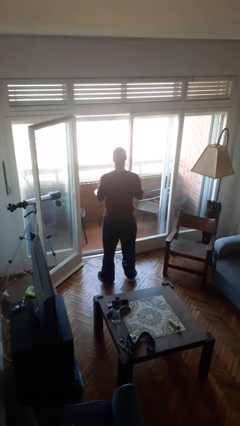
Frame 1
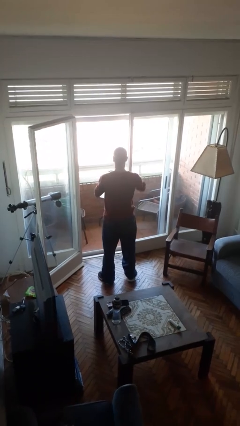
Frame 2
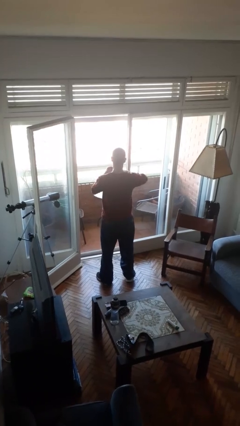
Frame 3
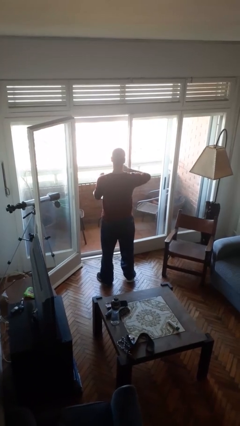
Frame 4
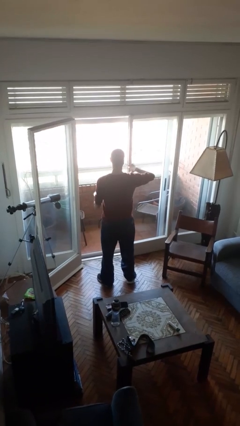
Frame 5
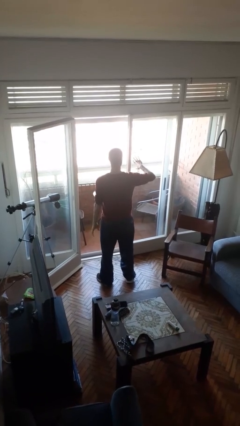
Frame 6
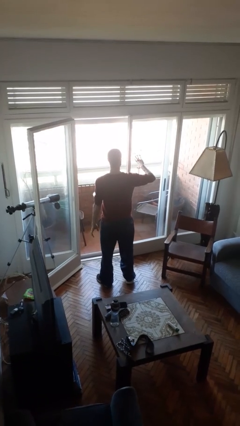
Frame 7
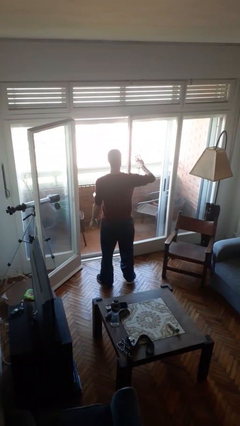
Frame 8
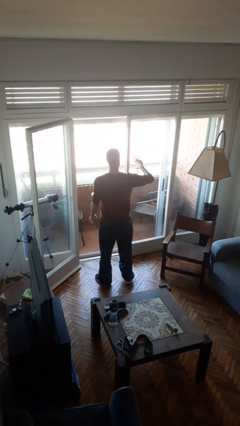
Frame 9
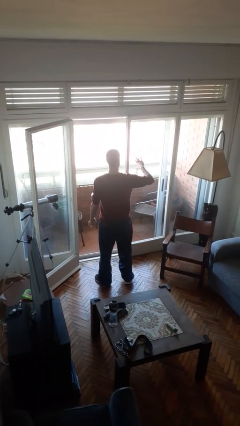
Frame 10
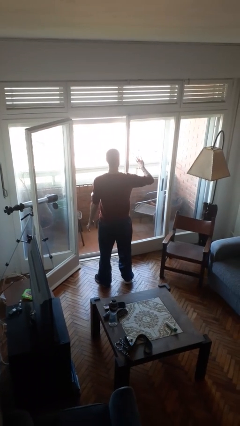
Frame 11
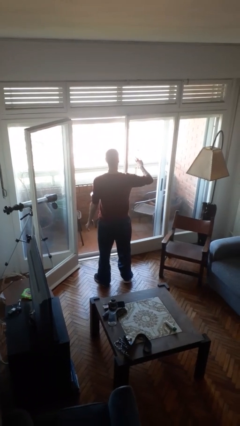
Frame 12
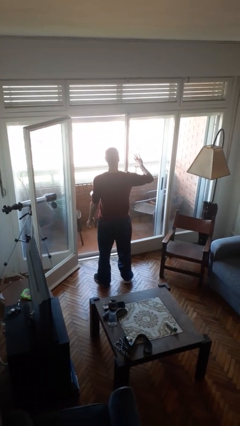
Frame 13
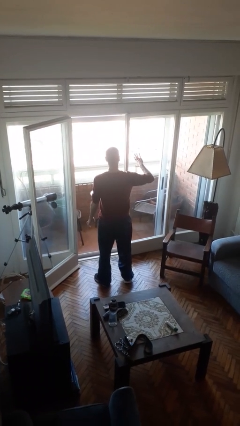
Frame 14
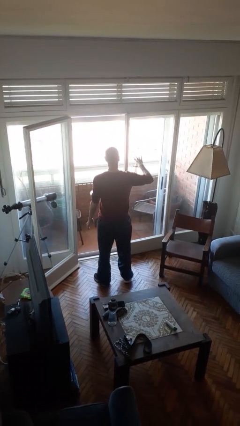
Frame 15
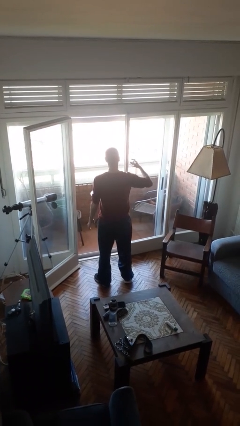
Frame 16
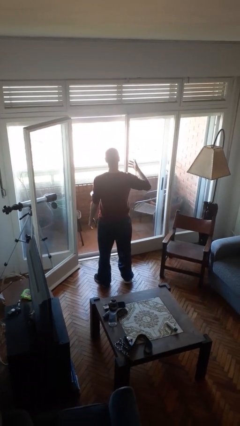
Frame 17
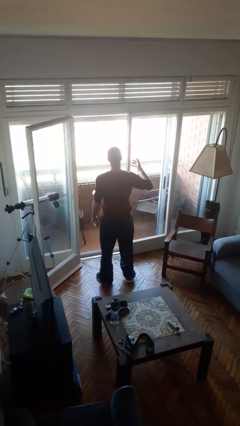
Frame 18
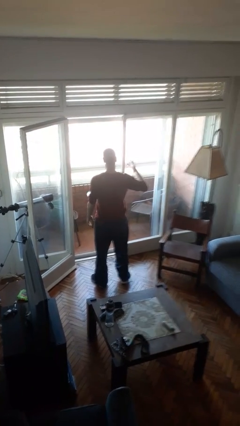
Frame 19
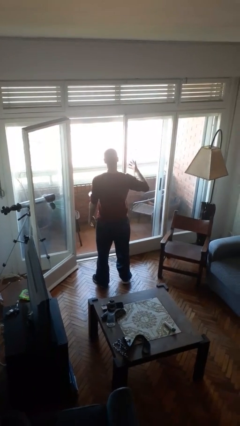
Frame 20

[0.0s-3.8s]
person puts on ring

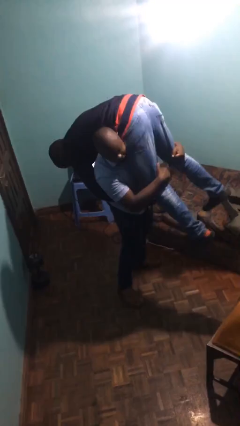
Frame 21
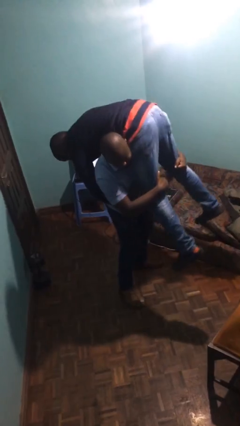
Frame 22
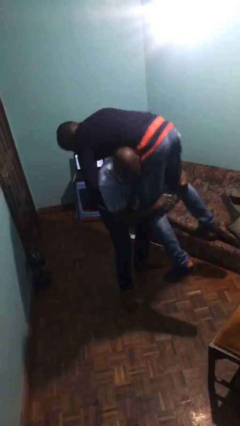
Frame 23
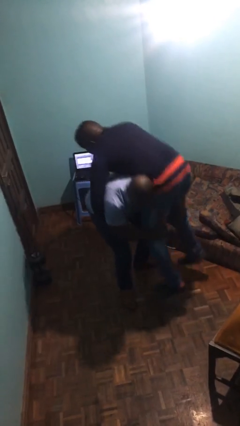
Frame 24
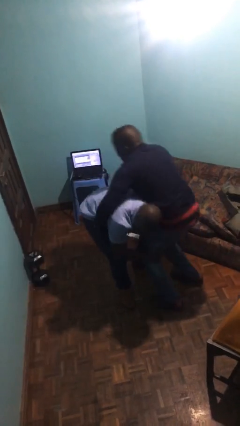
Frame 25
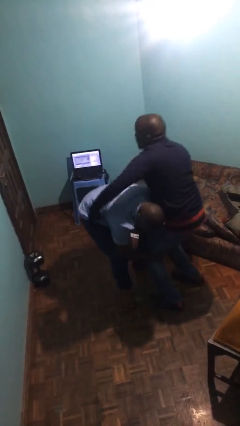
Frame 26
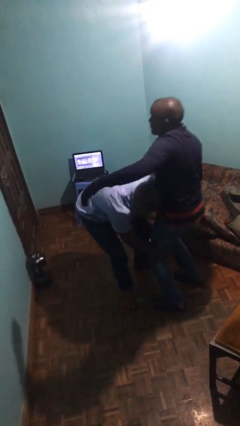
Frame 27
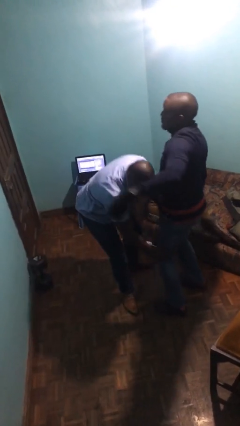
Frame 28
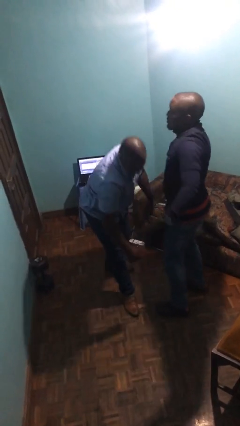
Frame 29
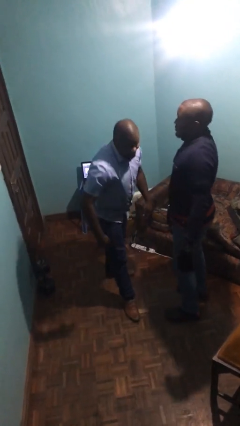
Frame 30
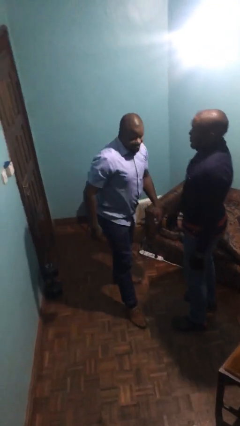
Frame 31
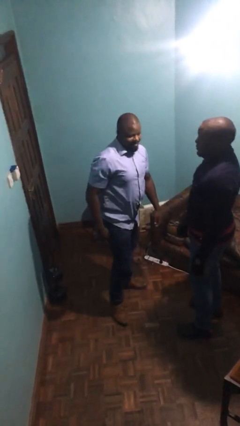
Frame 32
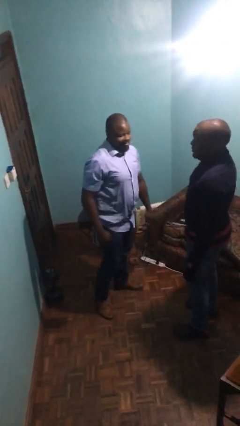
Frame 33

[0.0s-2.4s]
person puts down person

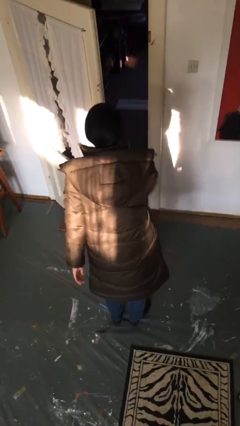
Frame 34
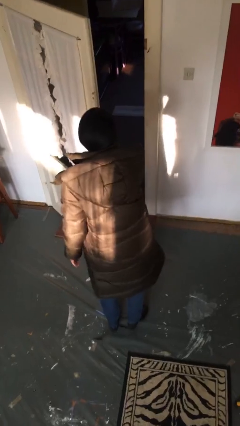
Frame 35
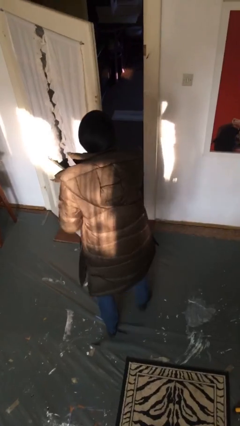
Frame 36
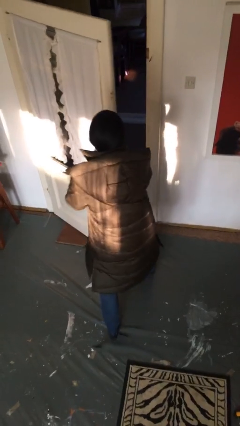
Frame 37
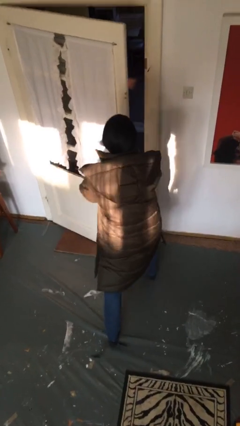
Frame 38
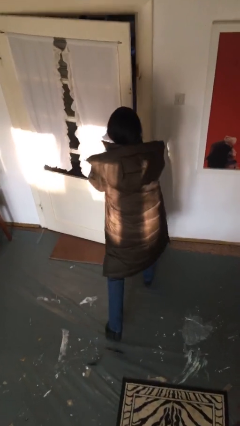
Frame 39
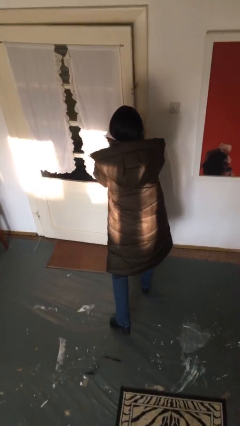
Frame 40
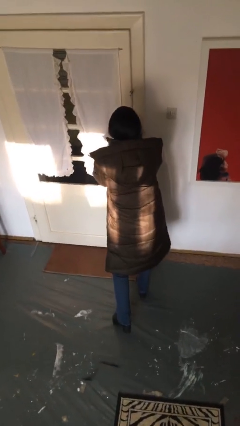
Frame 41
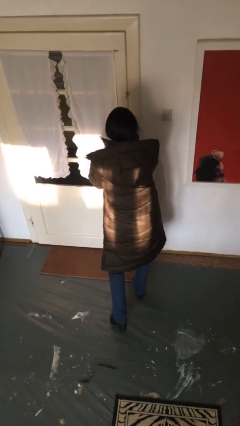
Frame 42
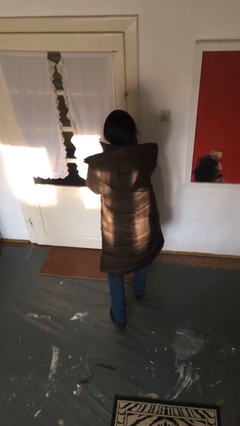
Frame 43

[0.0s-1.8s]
person closes facility door

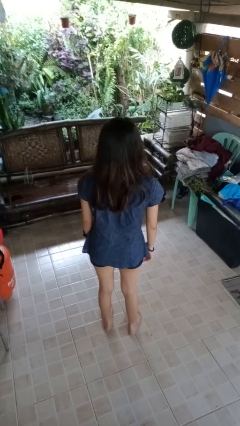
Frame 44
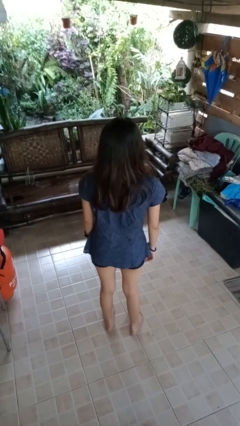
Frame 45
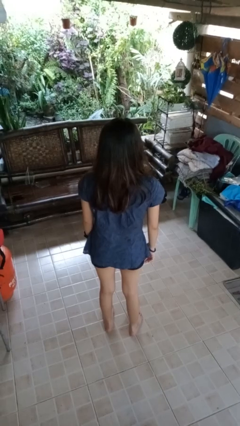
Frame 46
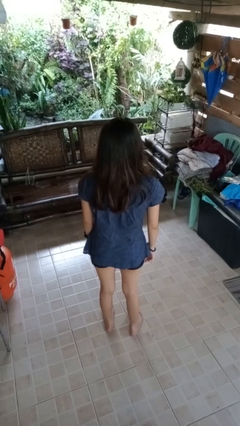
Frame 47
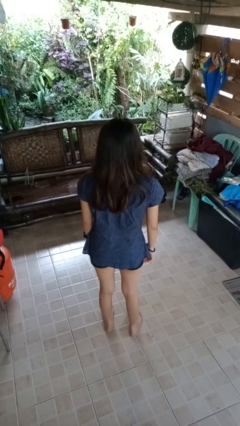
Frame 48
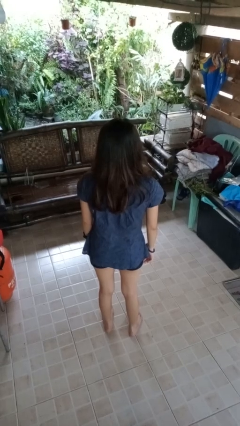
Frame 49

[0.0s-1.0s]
person stands up from floor

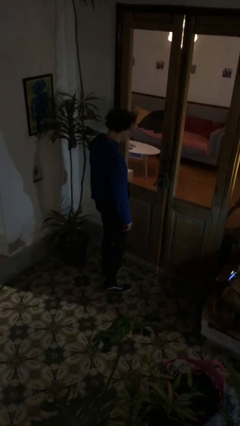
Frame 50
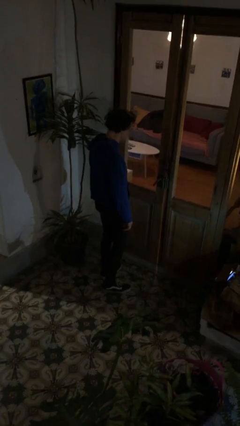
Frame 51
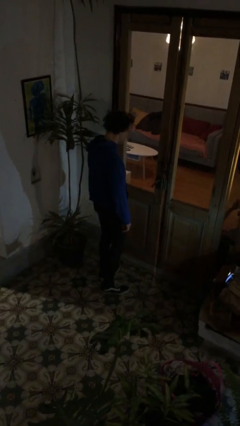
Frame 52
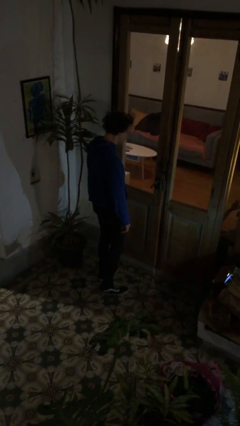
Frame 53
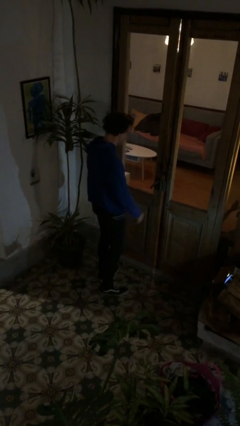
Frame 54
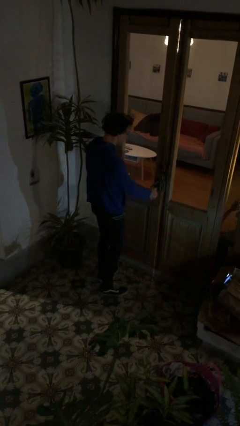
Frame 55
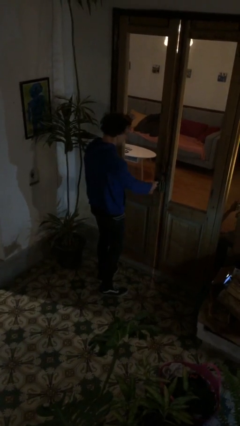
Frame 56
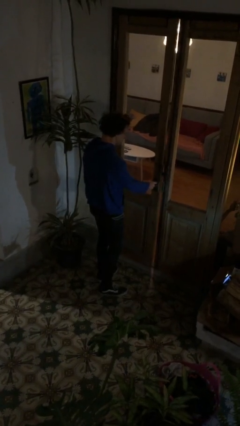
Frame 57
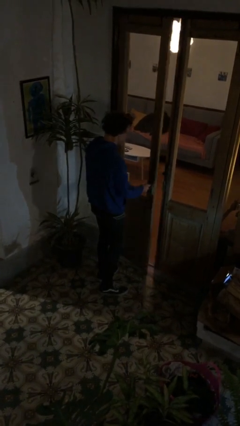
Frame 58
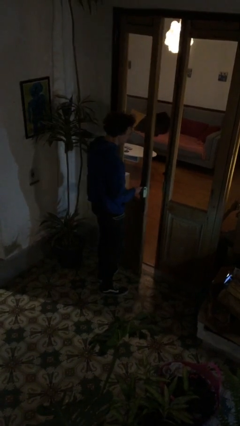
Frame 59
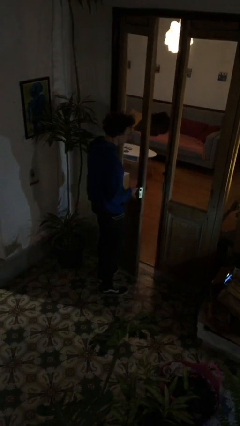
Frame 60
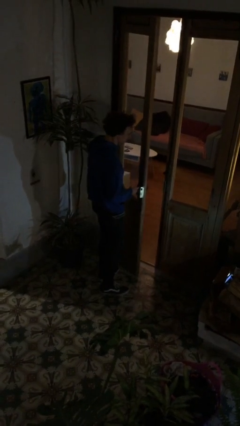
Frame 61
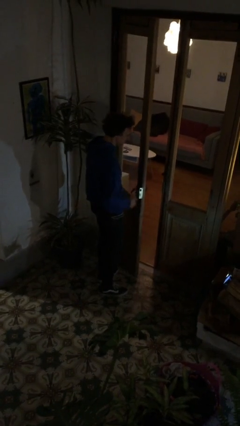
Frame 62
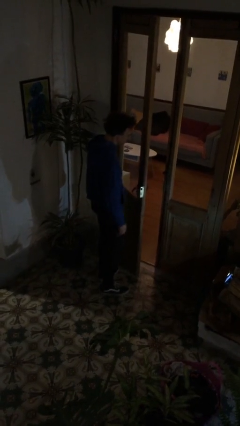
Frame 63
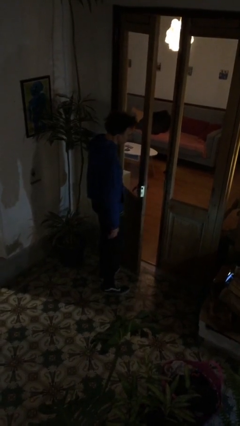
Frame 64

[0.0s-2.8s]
person opens facility door

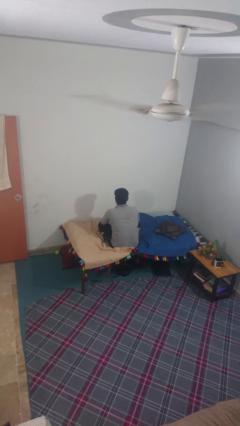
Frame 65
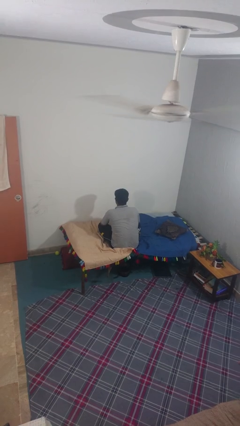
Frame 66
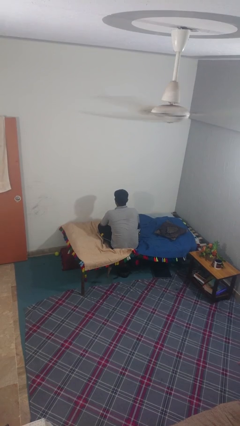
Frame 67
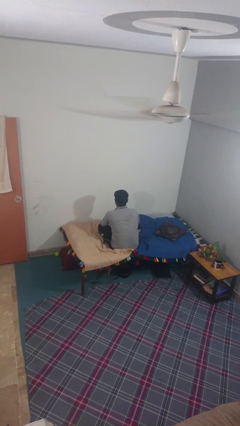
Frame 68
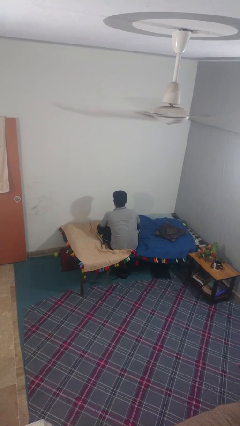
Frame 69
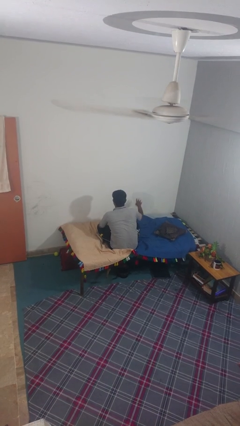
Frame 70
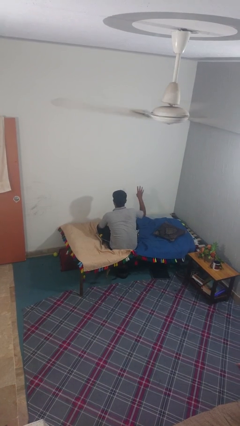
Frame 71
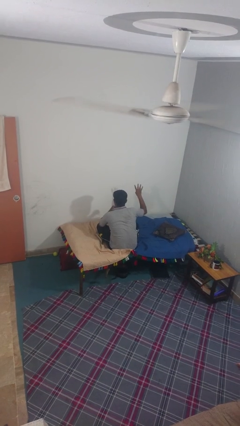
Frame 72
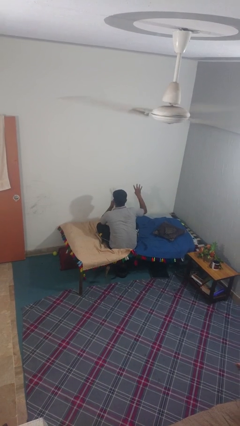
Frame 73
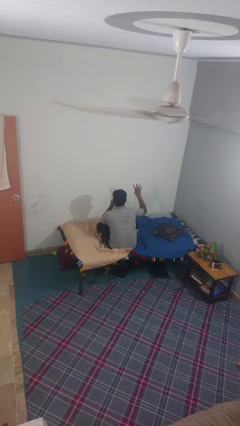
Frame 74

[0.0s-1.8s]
person gestures number four

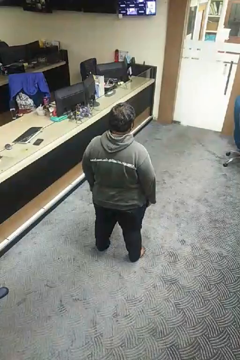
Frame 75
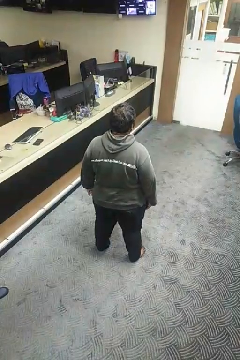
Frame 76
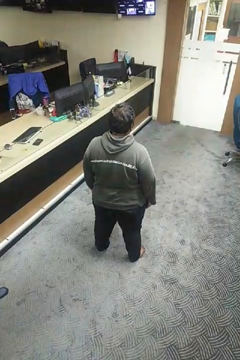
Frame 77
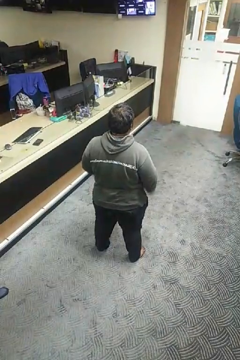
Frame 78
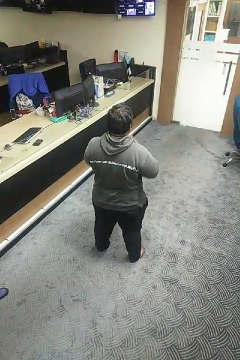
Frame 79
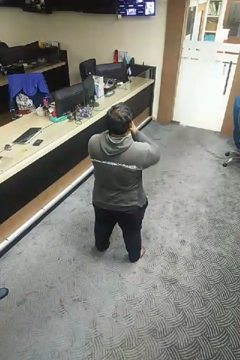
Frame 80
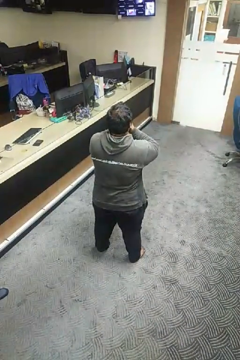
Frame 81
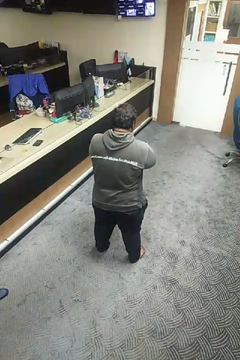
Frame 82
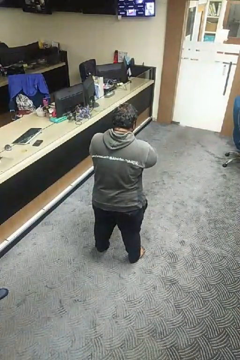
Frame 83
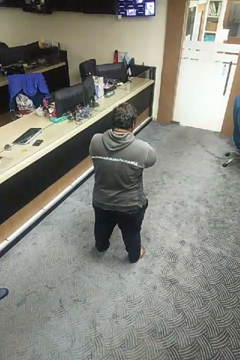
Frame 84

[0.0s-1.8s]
person sneezes into hand

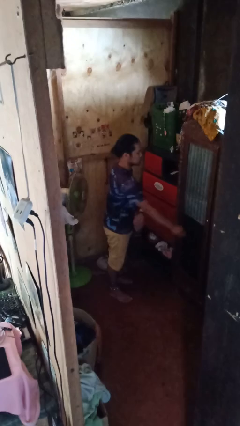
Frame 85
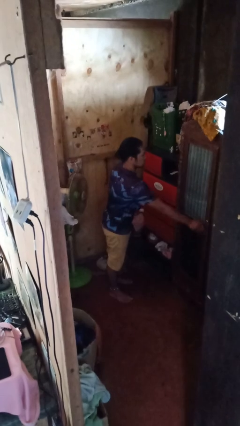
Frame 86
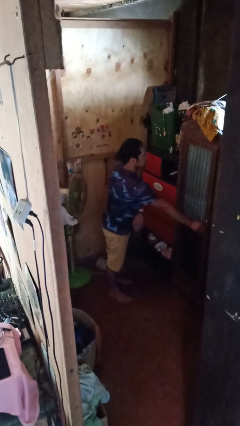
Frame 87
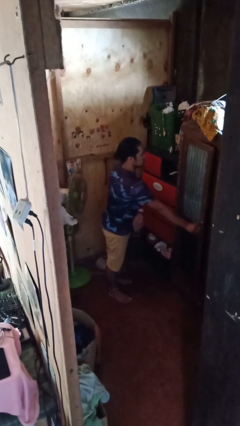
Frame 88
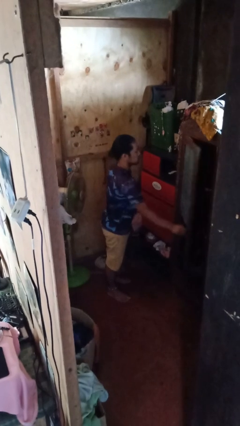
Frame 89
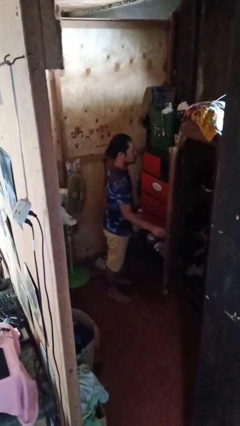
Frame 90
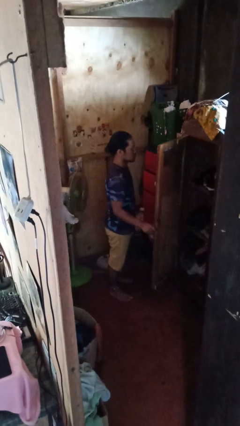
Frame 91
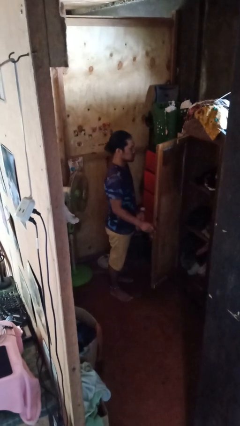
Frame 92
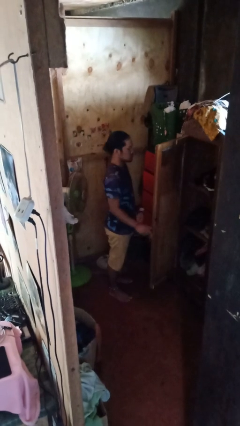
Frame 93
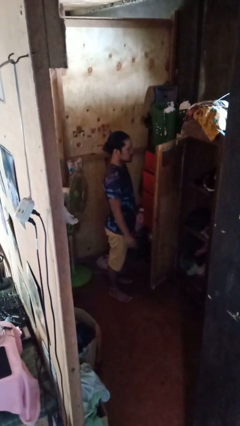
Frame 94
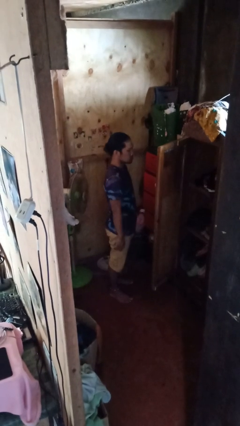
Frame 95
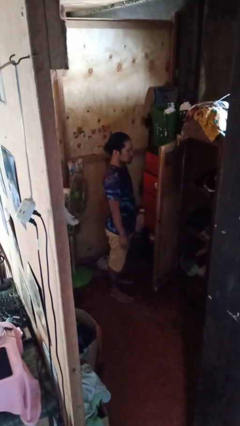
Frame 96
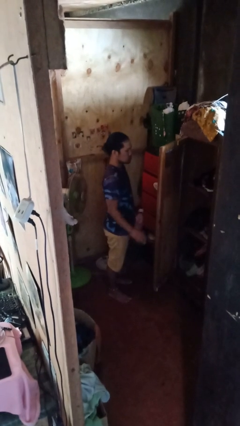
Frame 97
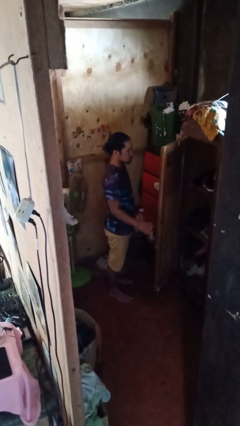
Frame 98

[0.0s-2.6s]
person opens closet door
